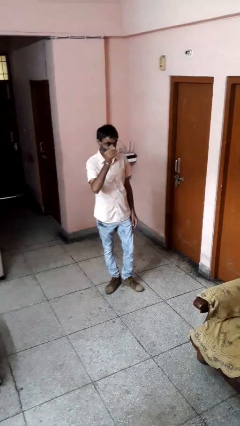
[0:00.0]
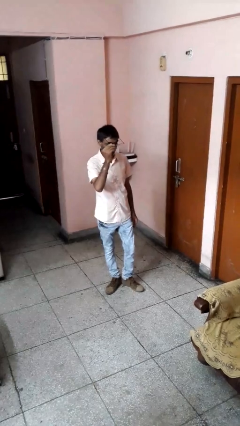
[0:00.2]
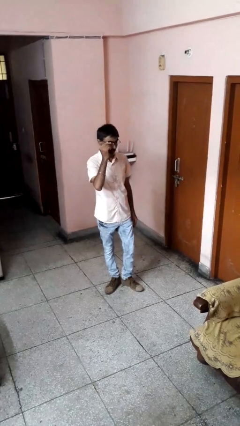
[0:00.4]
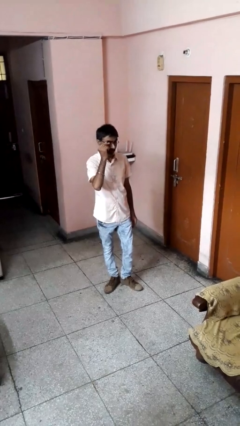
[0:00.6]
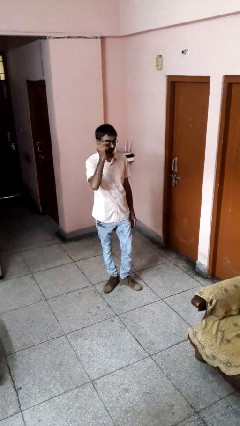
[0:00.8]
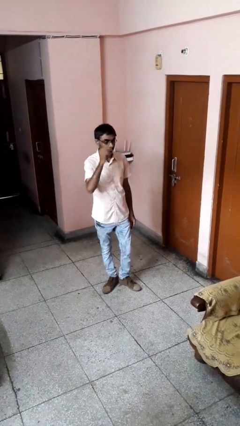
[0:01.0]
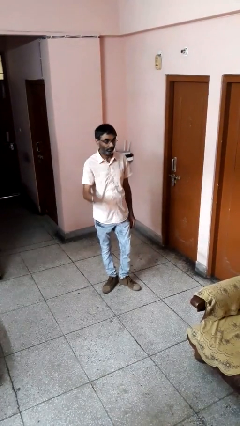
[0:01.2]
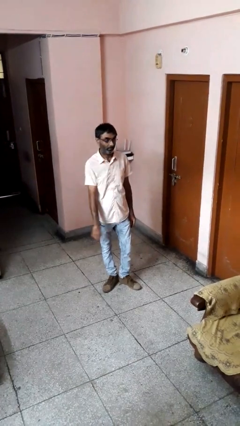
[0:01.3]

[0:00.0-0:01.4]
person puts on glasses

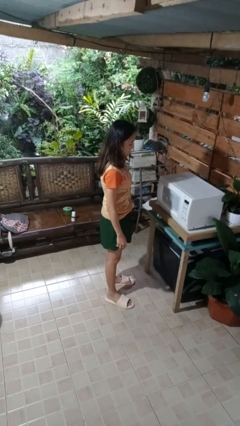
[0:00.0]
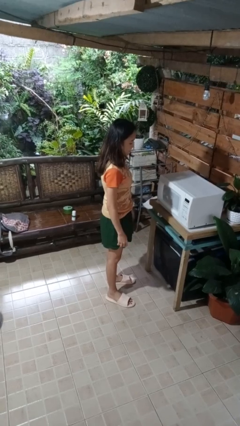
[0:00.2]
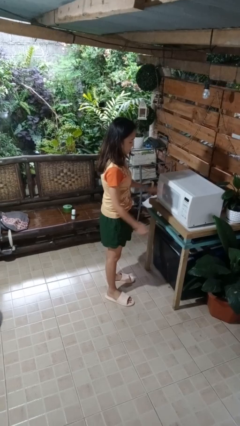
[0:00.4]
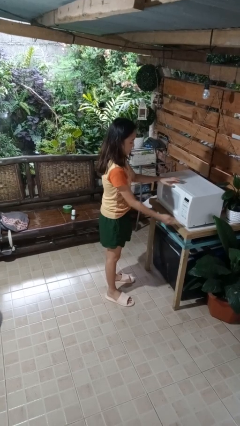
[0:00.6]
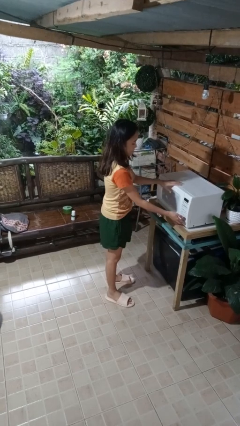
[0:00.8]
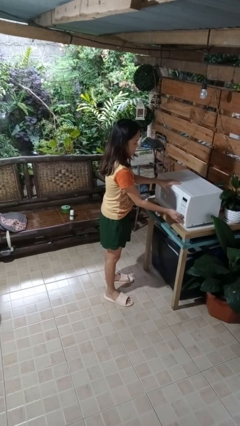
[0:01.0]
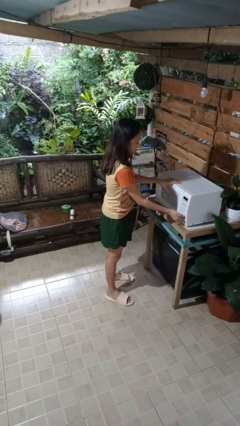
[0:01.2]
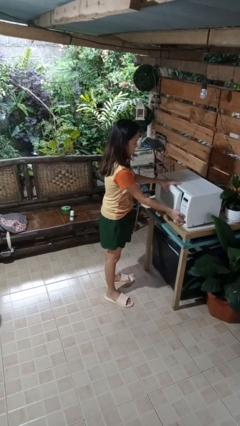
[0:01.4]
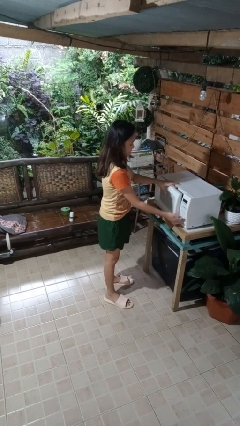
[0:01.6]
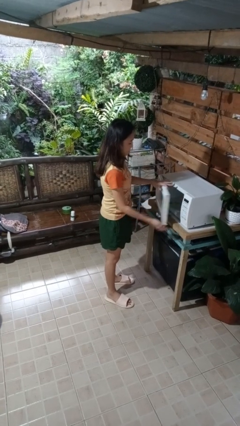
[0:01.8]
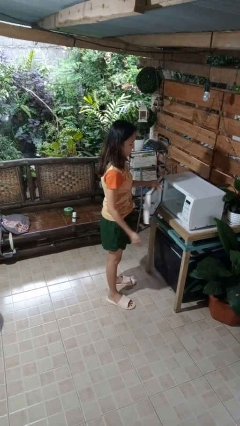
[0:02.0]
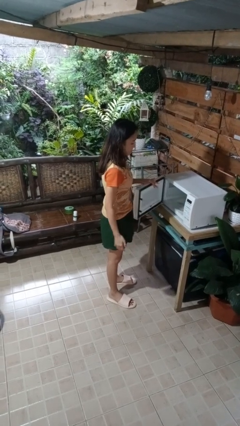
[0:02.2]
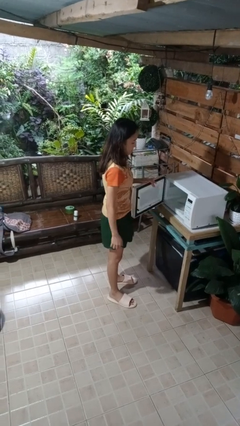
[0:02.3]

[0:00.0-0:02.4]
person opens microwave

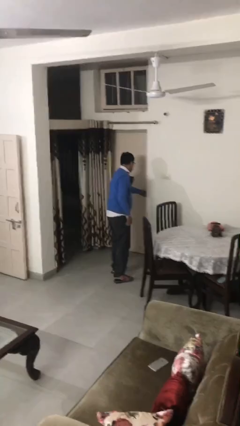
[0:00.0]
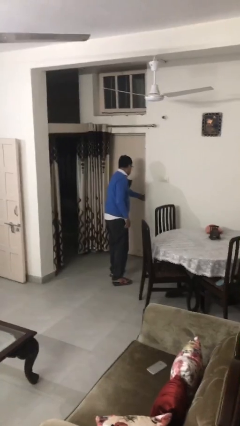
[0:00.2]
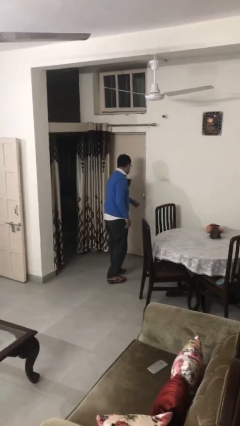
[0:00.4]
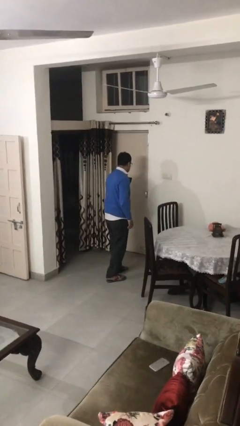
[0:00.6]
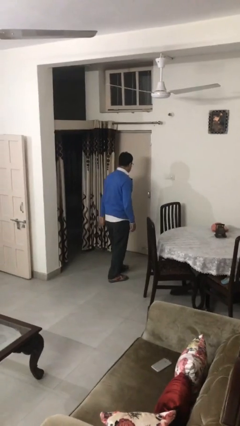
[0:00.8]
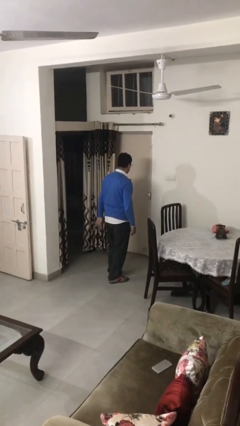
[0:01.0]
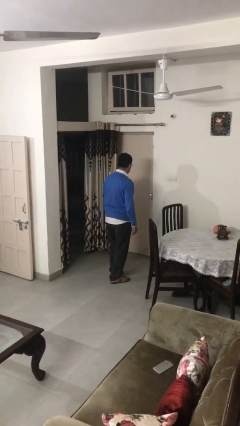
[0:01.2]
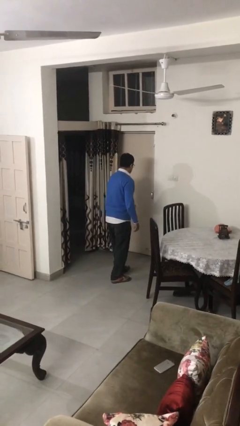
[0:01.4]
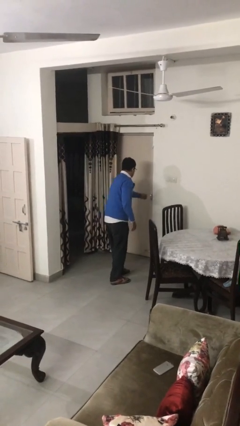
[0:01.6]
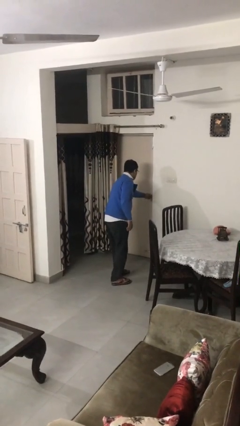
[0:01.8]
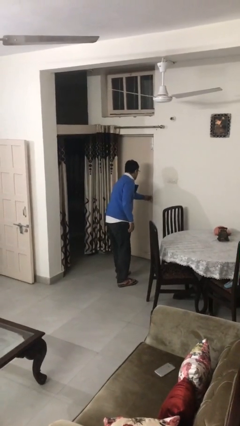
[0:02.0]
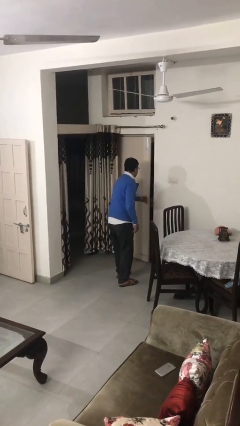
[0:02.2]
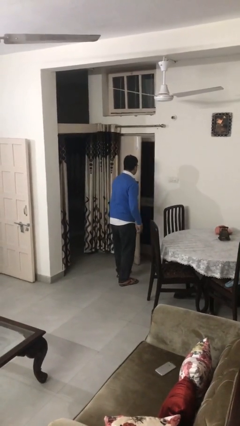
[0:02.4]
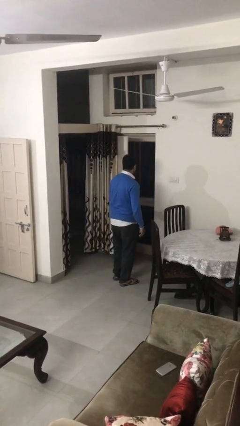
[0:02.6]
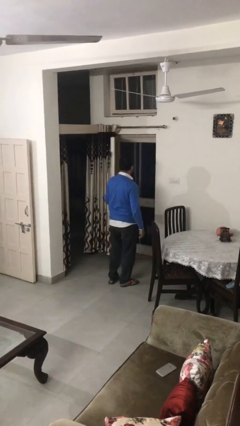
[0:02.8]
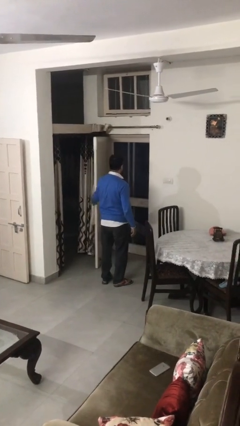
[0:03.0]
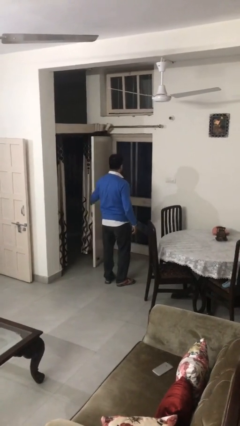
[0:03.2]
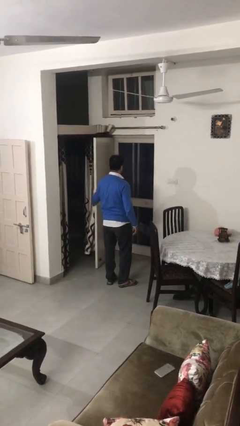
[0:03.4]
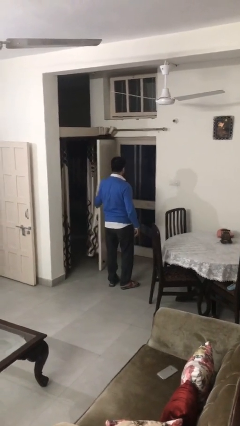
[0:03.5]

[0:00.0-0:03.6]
person opens facility door

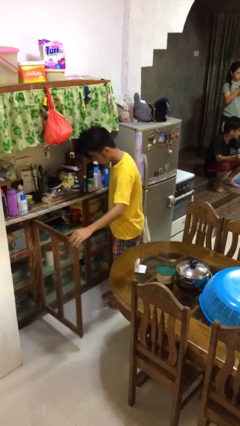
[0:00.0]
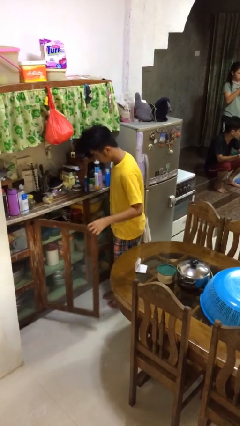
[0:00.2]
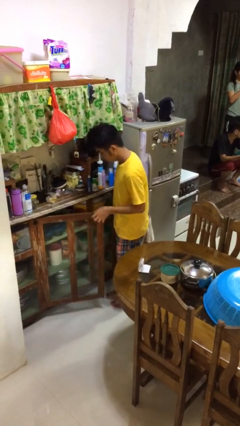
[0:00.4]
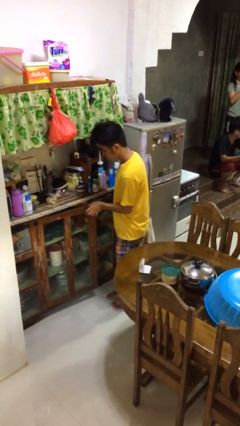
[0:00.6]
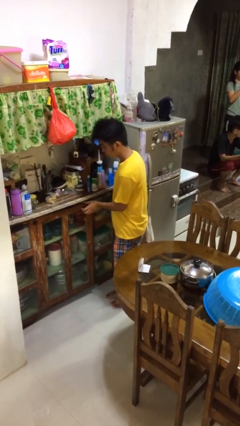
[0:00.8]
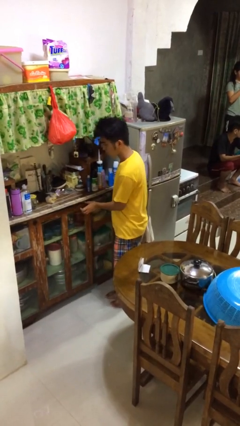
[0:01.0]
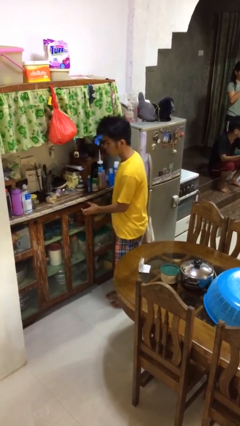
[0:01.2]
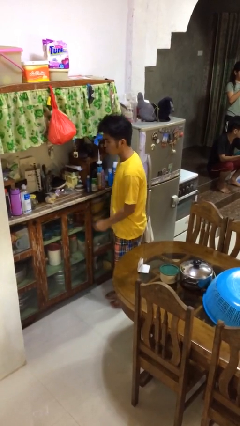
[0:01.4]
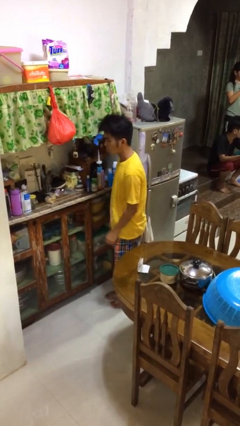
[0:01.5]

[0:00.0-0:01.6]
person closes cabinet

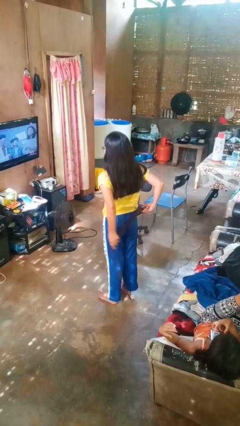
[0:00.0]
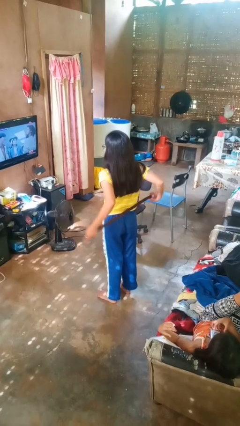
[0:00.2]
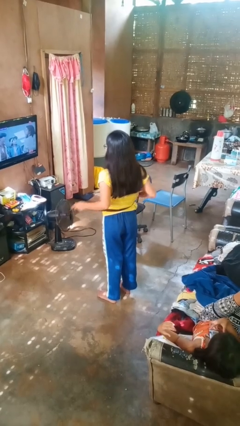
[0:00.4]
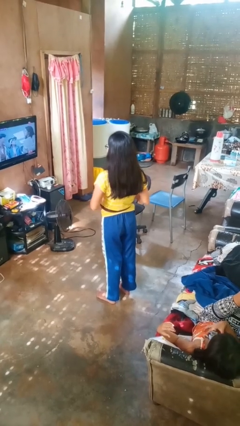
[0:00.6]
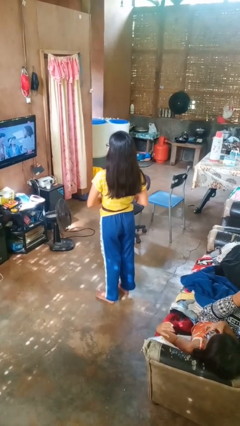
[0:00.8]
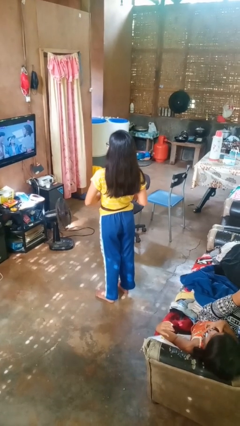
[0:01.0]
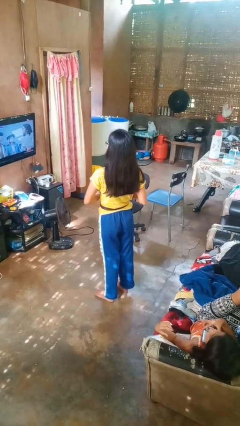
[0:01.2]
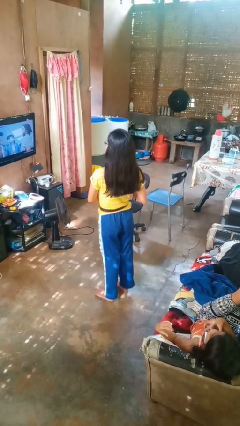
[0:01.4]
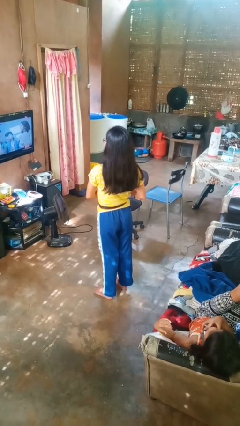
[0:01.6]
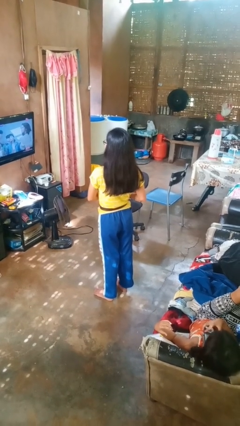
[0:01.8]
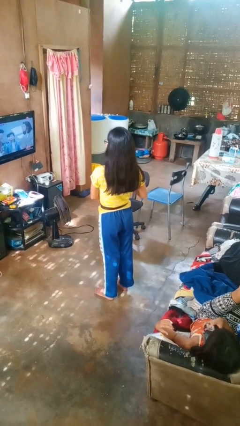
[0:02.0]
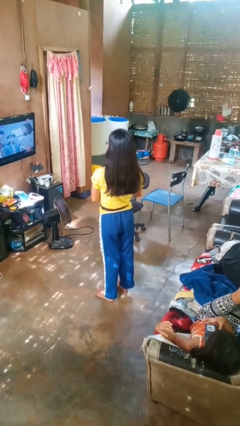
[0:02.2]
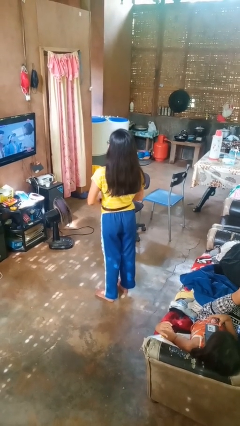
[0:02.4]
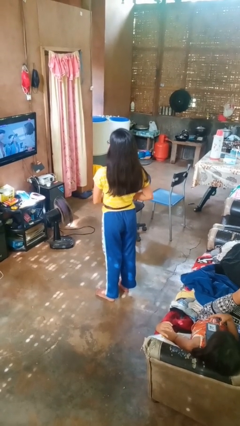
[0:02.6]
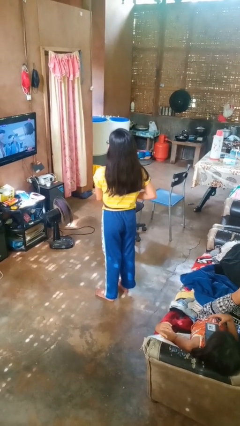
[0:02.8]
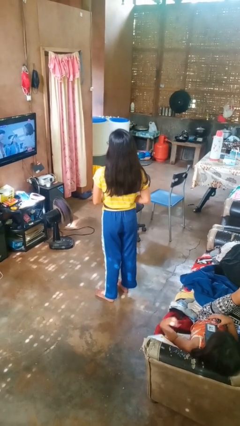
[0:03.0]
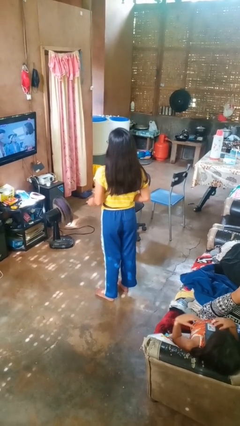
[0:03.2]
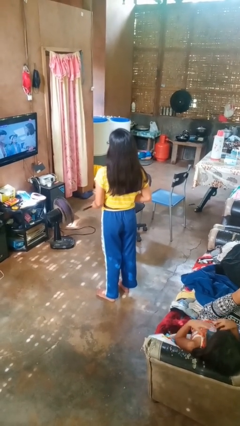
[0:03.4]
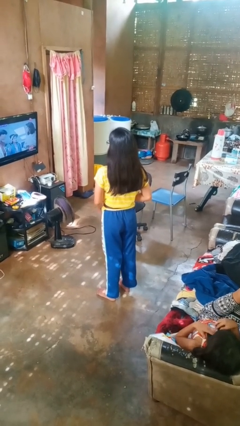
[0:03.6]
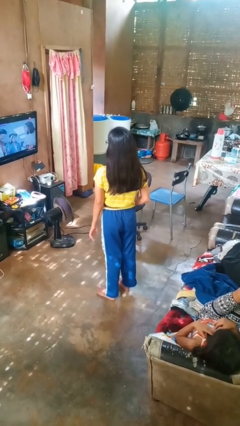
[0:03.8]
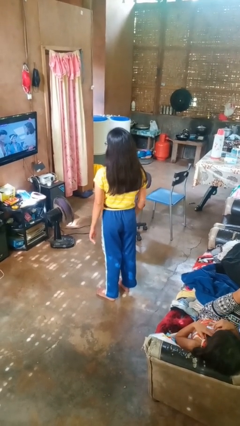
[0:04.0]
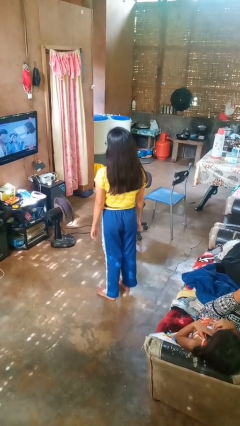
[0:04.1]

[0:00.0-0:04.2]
person puts on belt

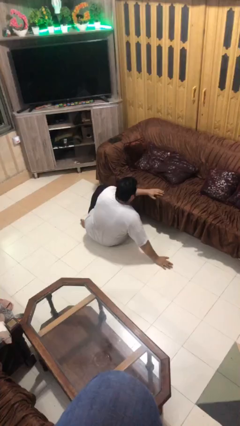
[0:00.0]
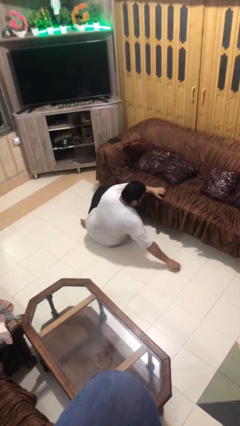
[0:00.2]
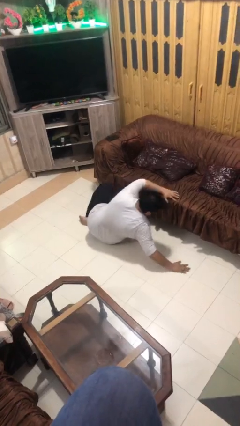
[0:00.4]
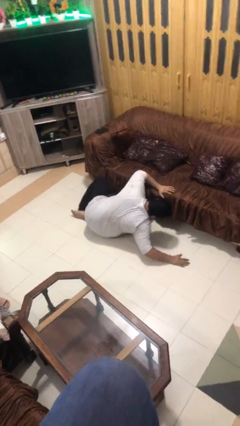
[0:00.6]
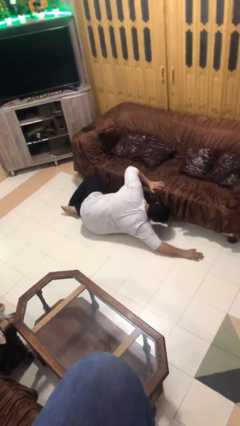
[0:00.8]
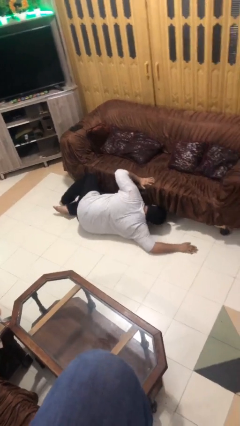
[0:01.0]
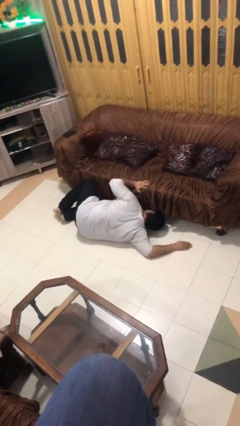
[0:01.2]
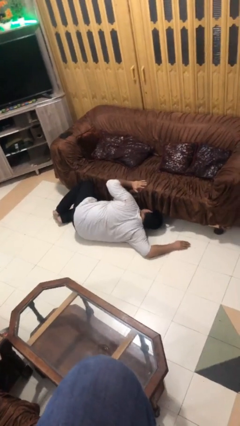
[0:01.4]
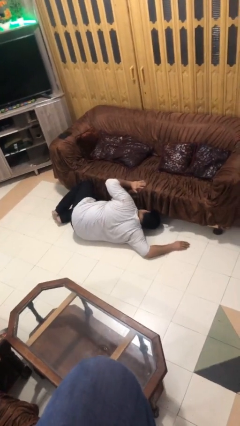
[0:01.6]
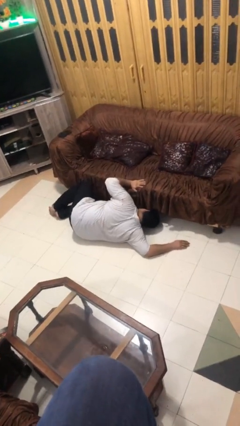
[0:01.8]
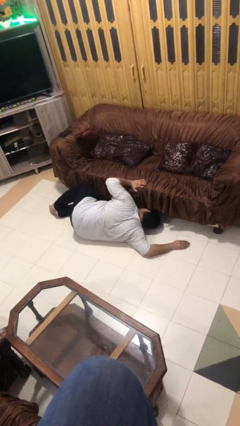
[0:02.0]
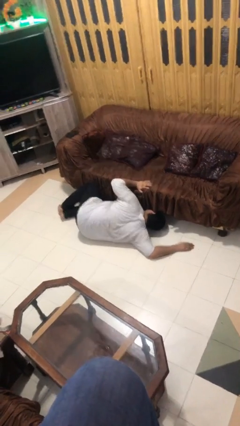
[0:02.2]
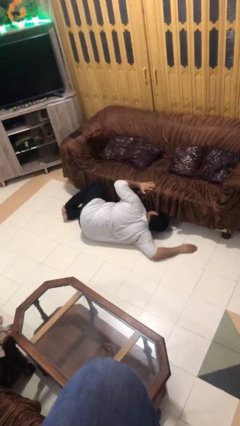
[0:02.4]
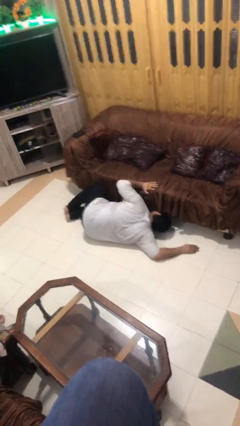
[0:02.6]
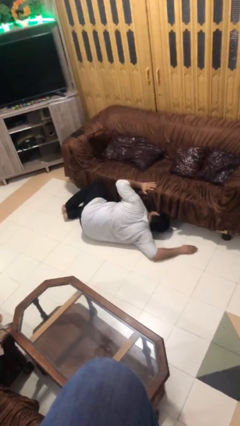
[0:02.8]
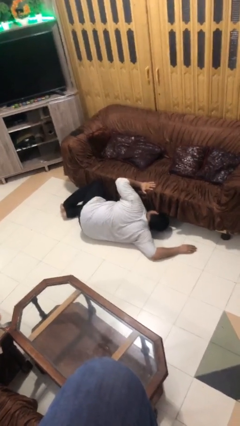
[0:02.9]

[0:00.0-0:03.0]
person searches under couch

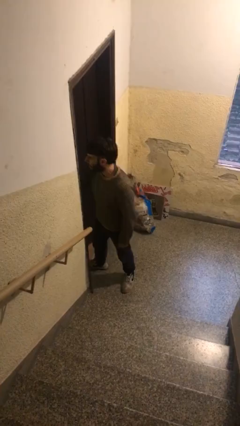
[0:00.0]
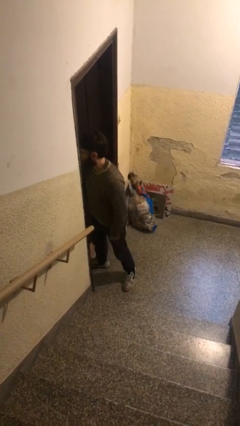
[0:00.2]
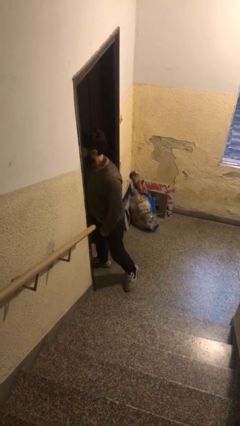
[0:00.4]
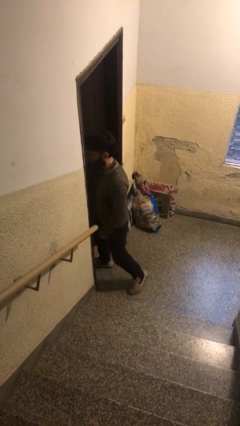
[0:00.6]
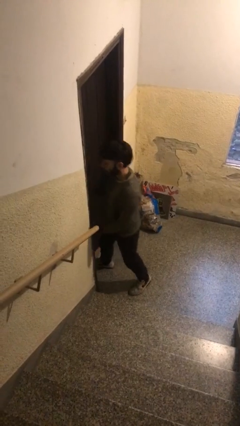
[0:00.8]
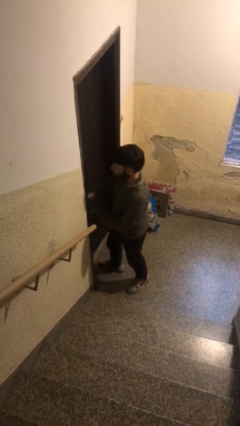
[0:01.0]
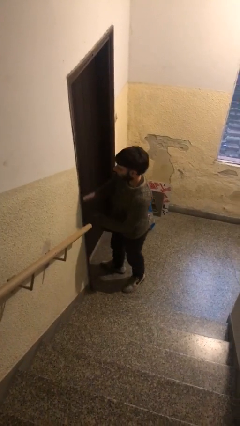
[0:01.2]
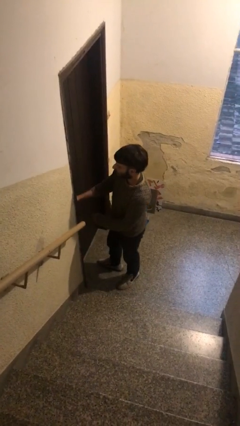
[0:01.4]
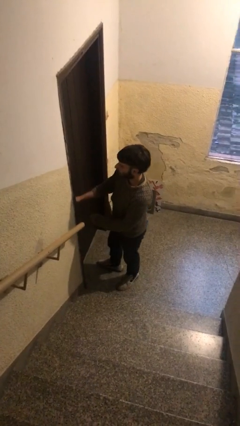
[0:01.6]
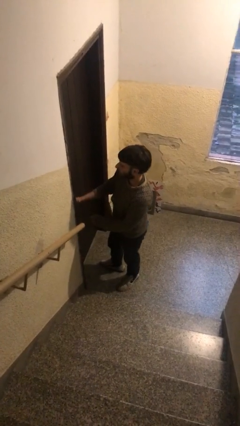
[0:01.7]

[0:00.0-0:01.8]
person closes facility door
